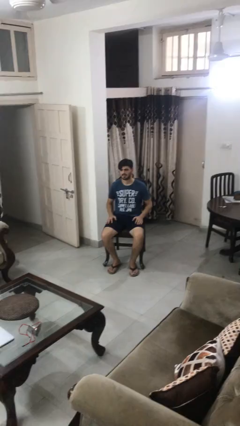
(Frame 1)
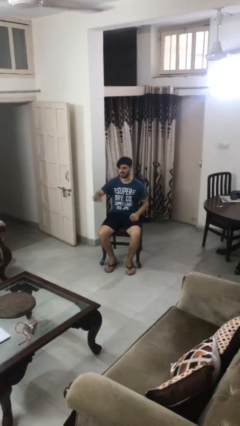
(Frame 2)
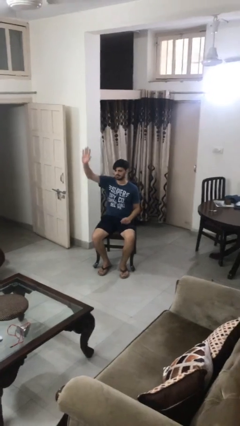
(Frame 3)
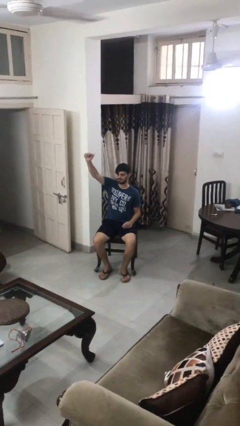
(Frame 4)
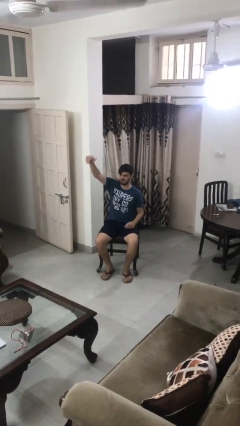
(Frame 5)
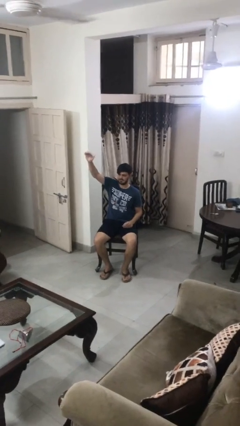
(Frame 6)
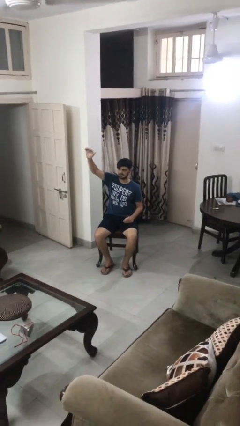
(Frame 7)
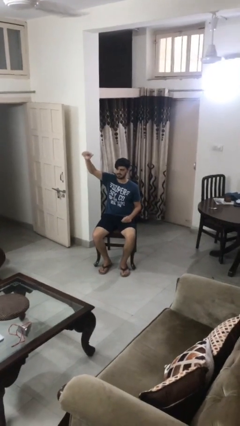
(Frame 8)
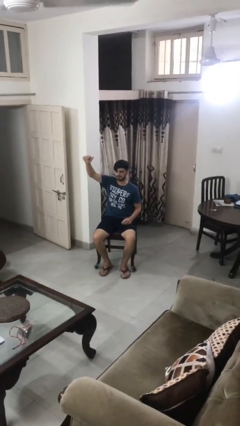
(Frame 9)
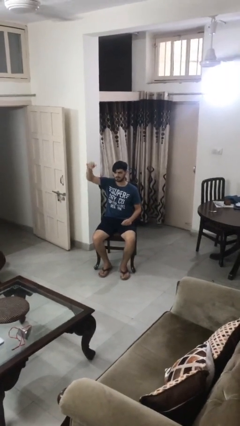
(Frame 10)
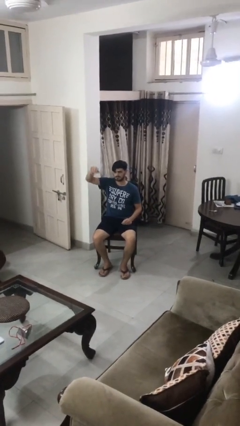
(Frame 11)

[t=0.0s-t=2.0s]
person gestures come here

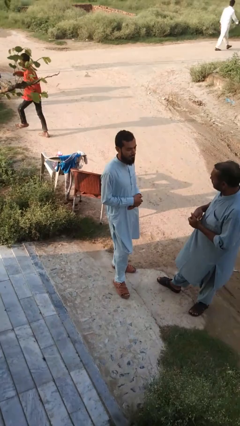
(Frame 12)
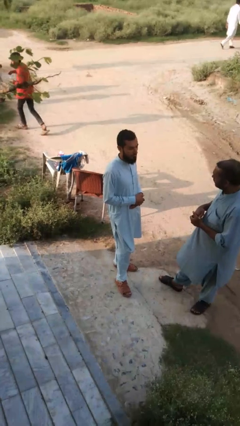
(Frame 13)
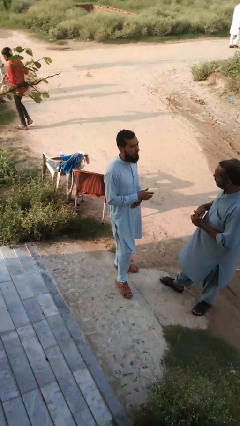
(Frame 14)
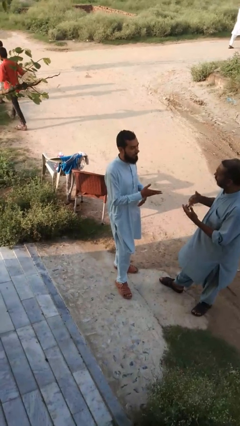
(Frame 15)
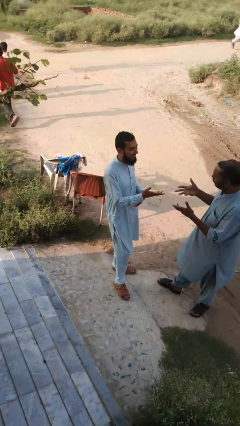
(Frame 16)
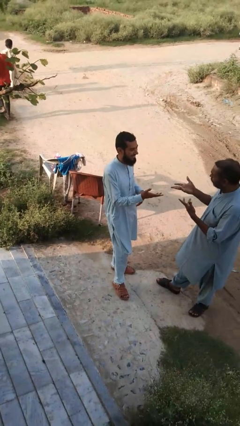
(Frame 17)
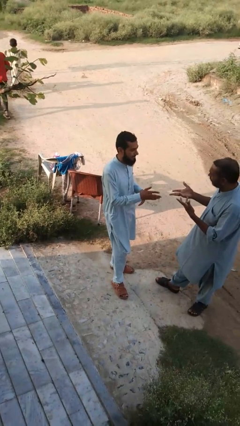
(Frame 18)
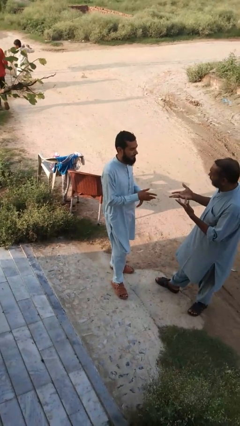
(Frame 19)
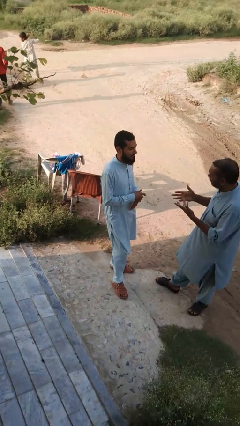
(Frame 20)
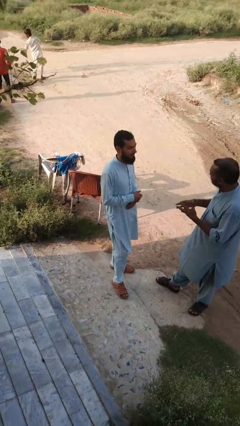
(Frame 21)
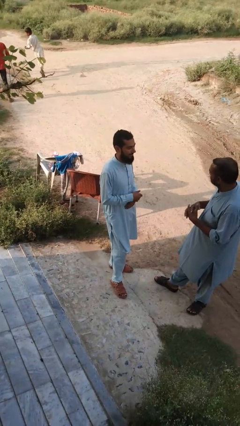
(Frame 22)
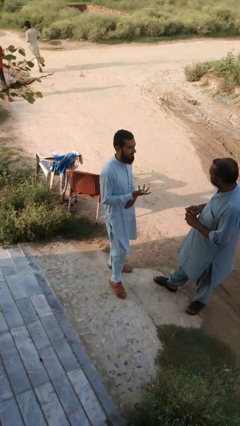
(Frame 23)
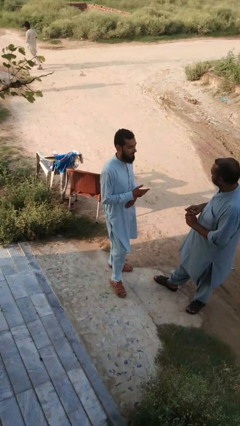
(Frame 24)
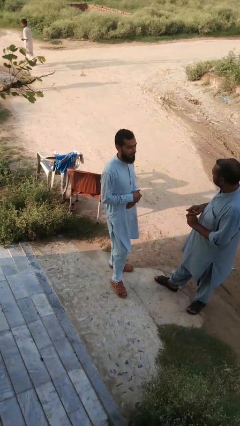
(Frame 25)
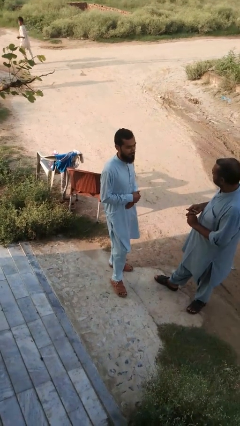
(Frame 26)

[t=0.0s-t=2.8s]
person talks to person

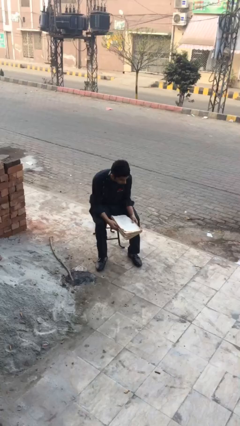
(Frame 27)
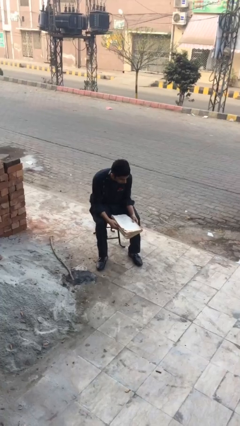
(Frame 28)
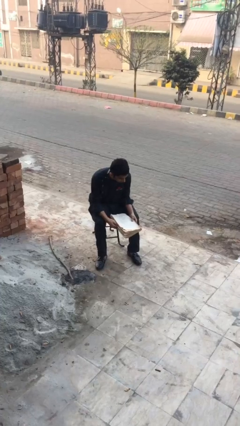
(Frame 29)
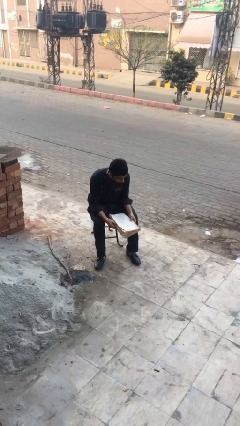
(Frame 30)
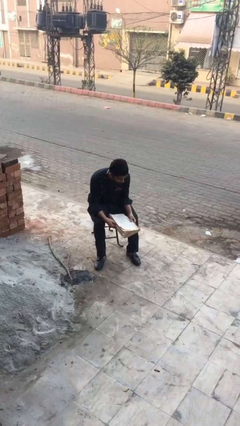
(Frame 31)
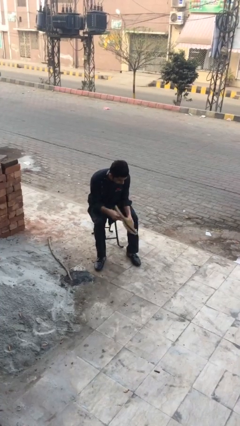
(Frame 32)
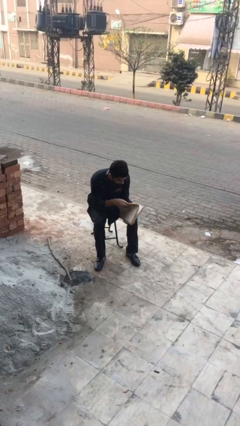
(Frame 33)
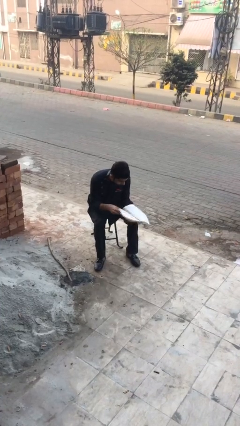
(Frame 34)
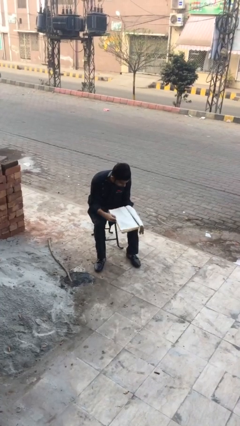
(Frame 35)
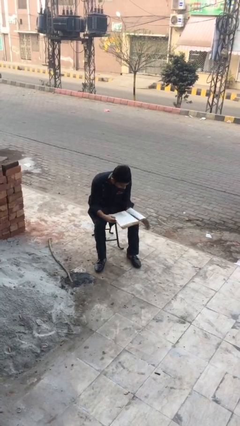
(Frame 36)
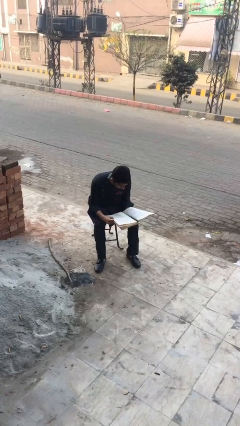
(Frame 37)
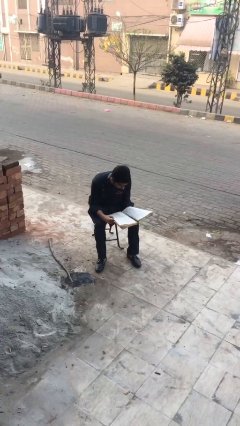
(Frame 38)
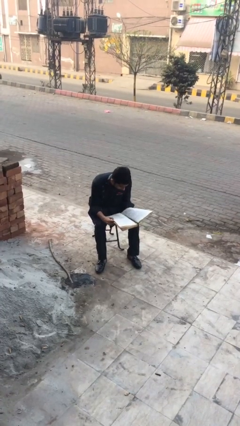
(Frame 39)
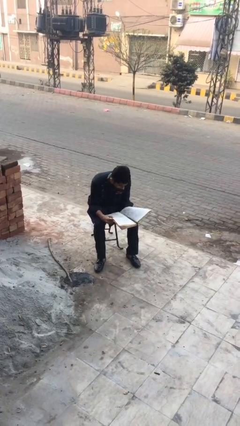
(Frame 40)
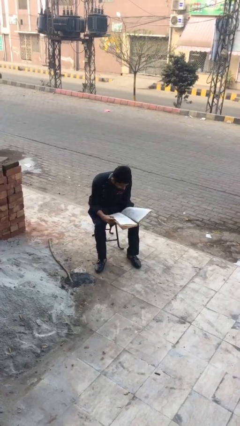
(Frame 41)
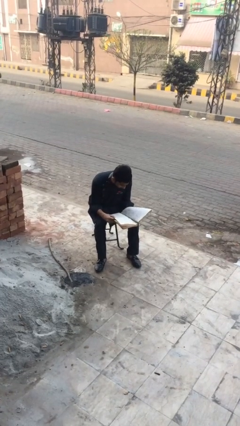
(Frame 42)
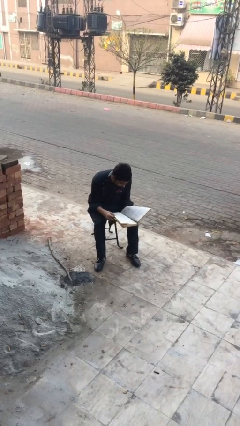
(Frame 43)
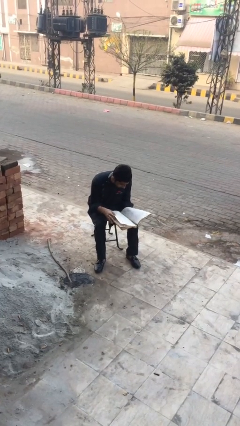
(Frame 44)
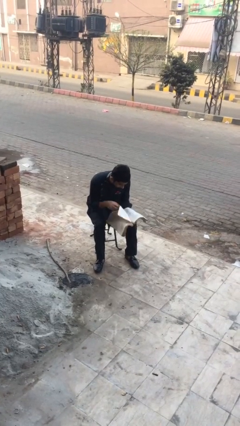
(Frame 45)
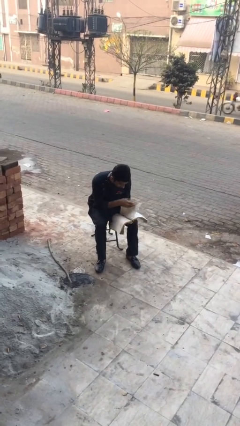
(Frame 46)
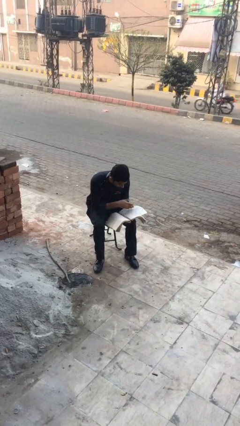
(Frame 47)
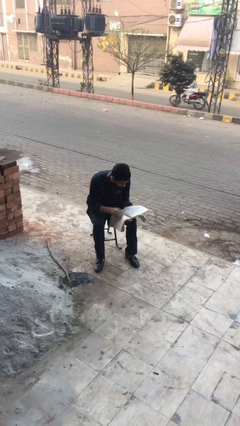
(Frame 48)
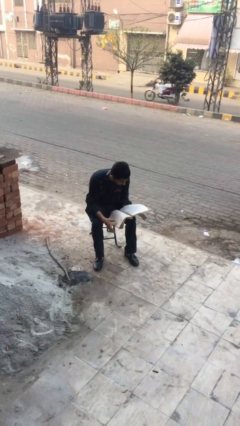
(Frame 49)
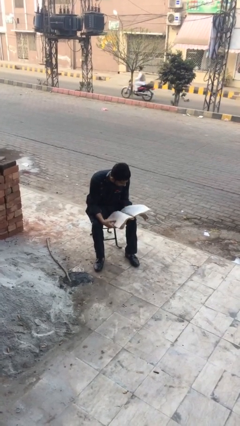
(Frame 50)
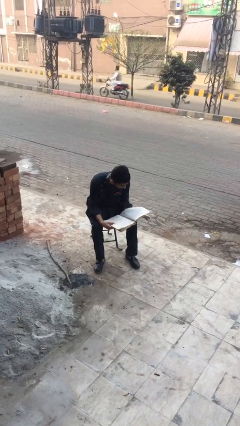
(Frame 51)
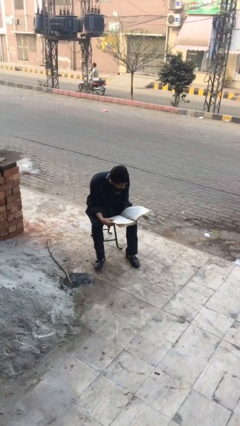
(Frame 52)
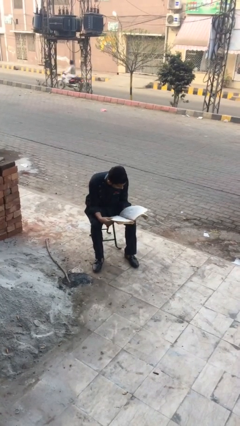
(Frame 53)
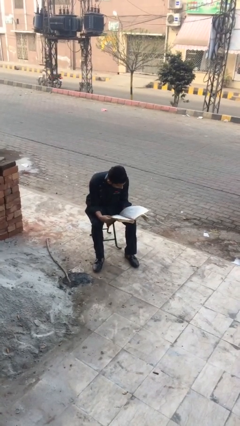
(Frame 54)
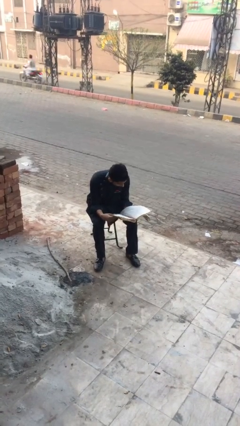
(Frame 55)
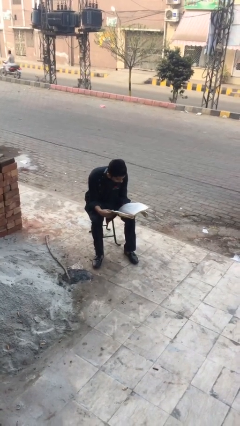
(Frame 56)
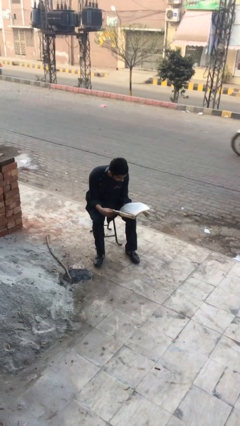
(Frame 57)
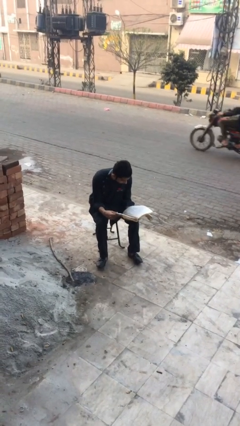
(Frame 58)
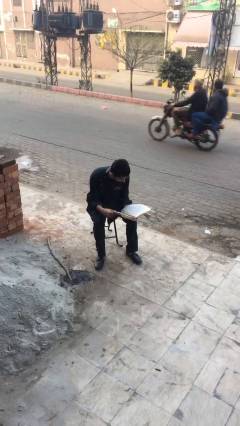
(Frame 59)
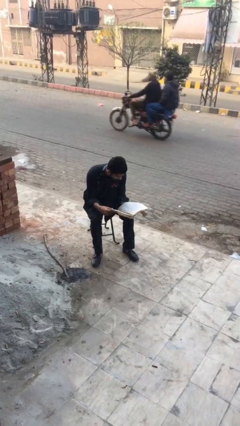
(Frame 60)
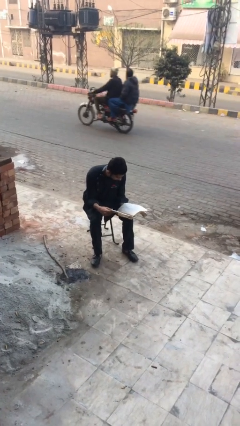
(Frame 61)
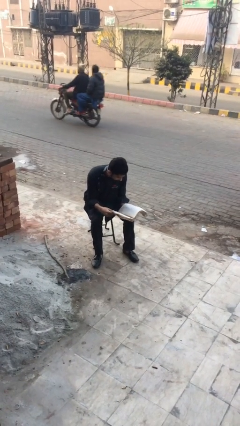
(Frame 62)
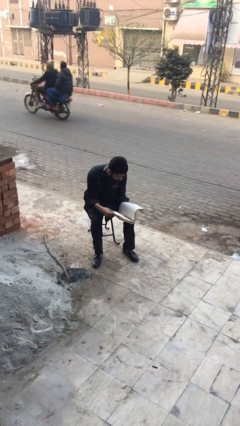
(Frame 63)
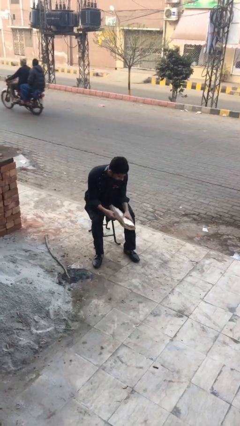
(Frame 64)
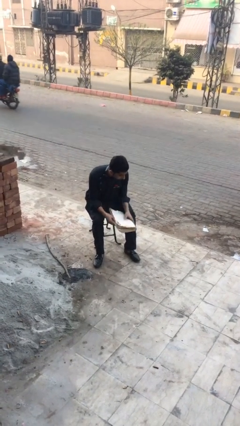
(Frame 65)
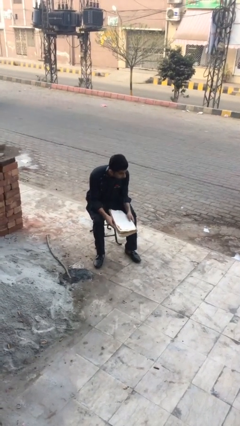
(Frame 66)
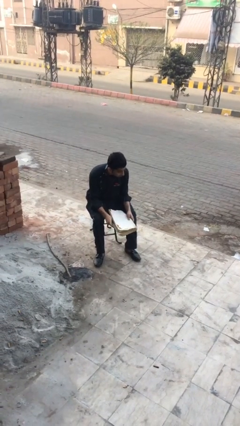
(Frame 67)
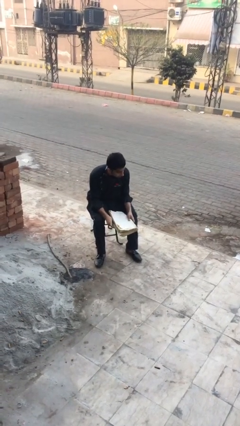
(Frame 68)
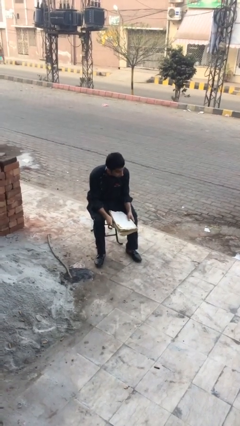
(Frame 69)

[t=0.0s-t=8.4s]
person reads document

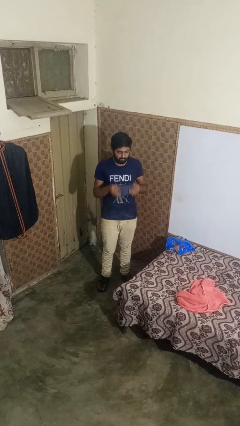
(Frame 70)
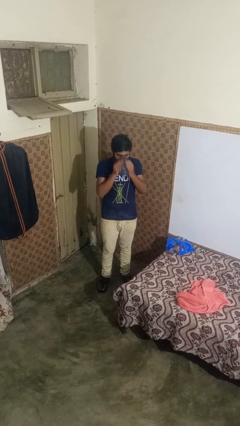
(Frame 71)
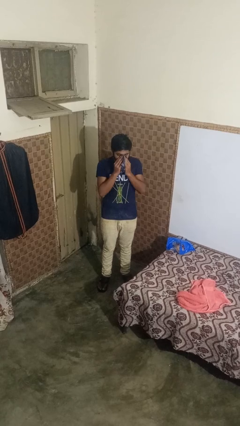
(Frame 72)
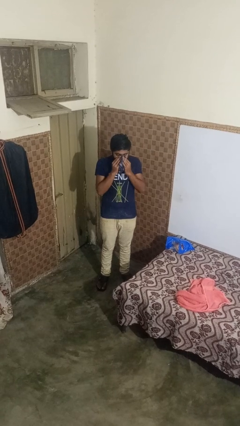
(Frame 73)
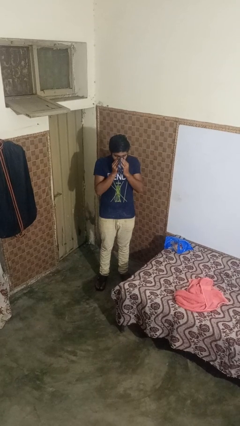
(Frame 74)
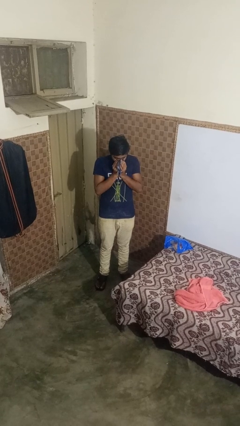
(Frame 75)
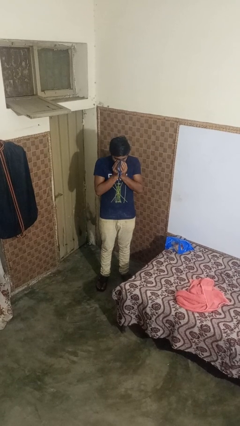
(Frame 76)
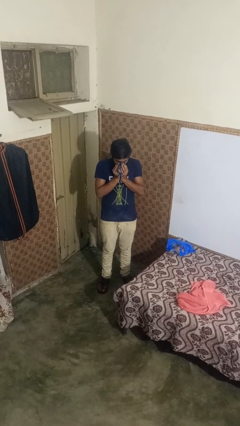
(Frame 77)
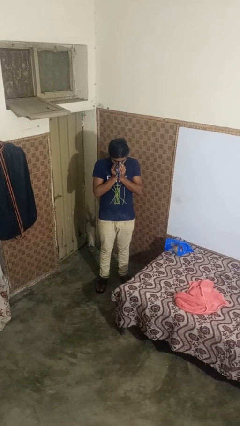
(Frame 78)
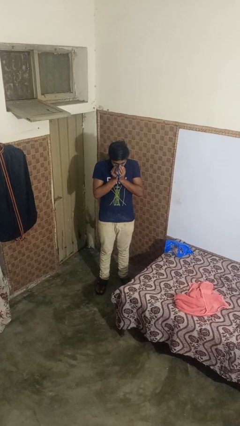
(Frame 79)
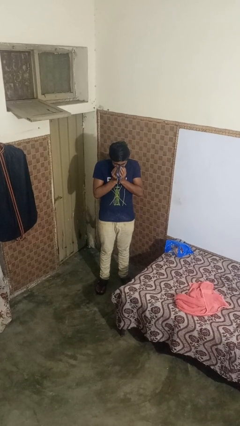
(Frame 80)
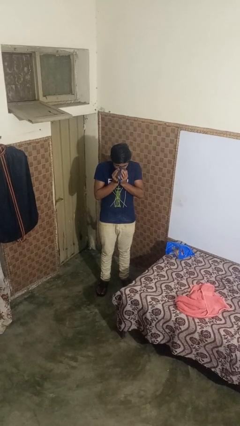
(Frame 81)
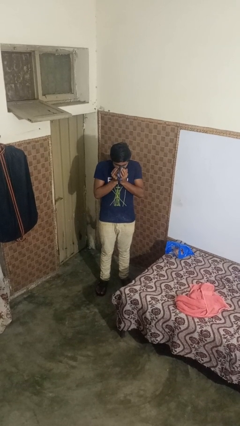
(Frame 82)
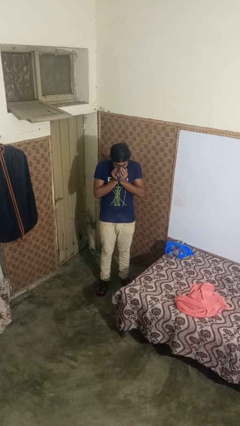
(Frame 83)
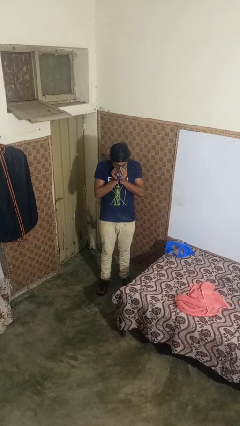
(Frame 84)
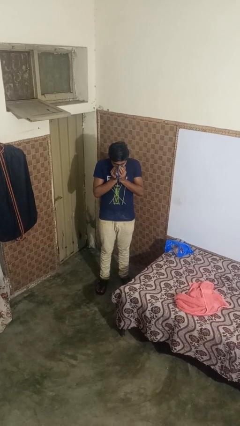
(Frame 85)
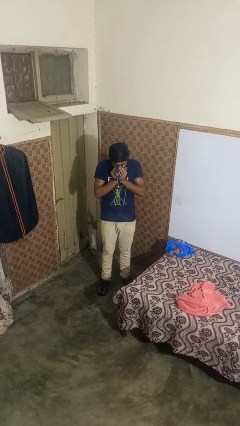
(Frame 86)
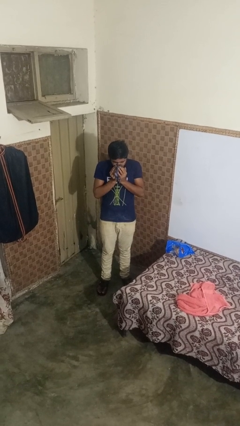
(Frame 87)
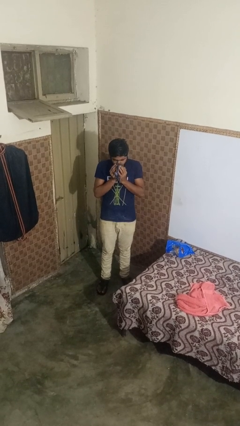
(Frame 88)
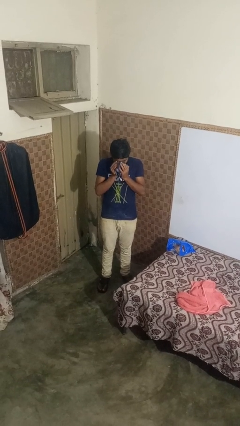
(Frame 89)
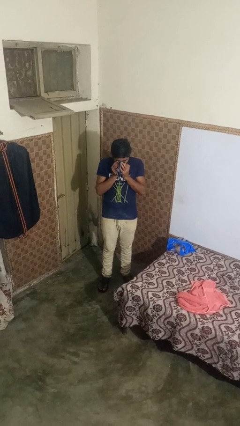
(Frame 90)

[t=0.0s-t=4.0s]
person blows nose

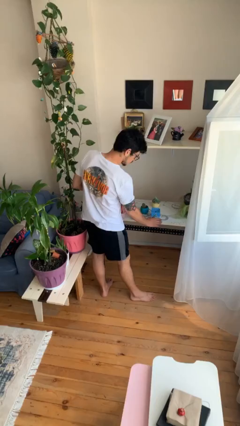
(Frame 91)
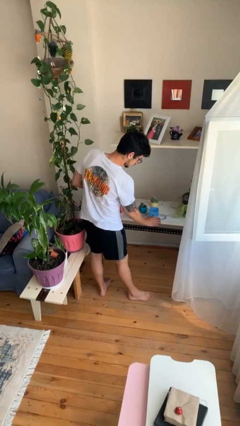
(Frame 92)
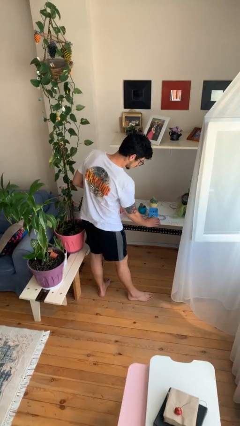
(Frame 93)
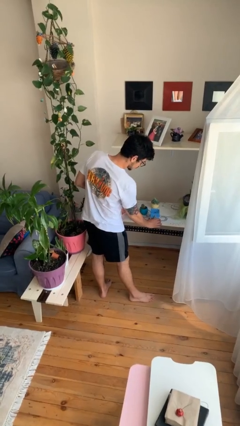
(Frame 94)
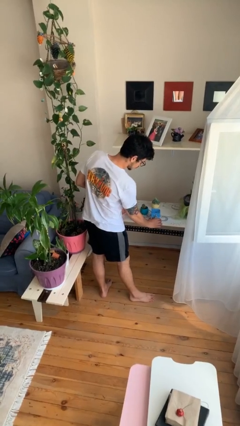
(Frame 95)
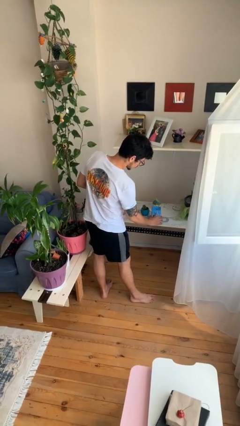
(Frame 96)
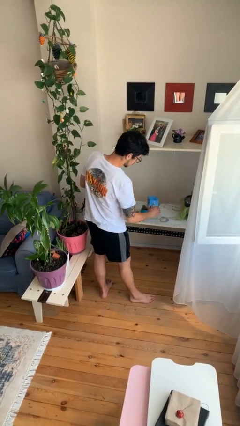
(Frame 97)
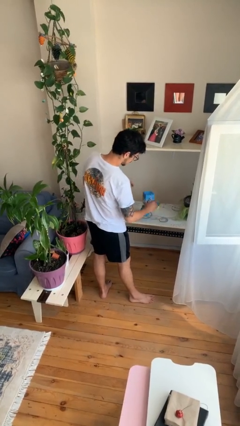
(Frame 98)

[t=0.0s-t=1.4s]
person picks up object from table
